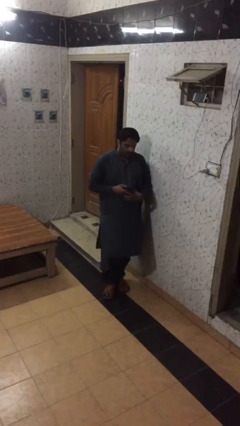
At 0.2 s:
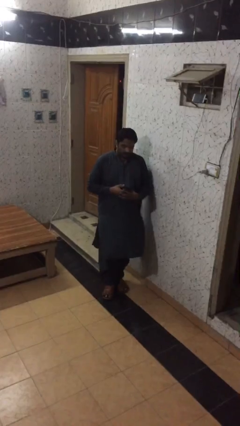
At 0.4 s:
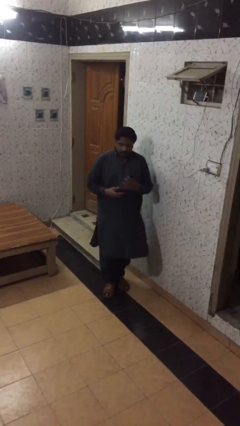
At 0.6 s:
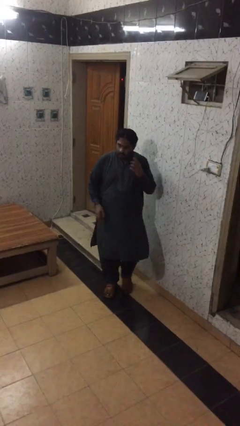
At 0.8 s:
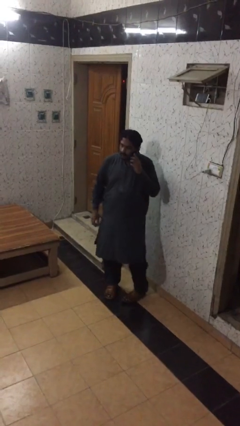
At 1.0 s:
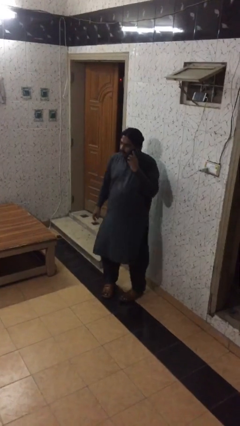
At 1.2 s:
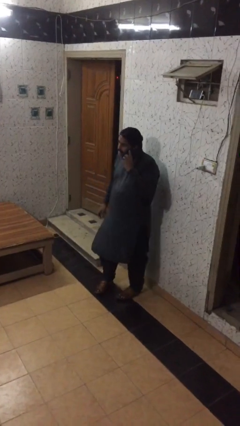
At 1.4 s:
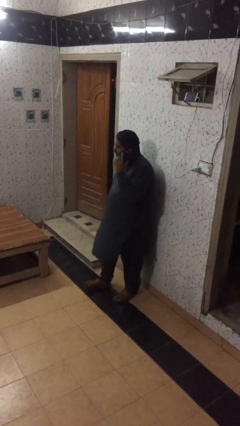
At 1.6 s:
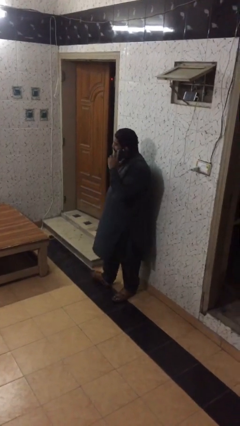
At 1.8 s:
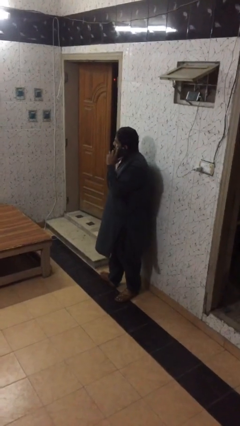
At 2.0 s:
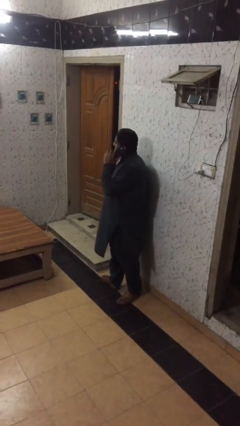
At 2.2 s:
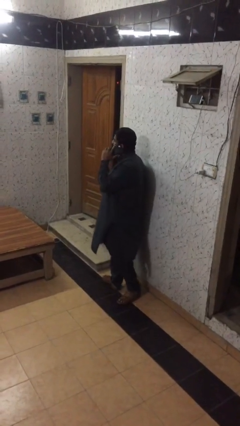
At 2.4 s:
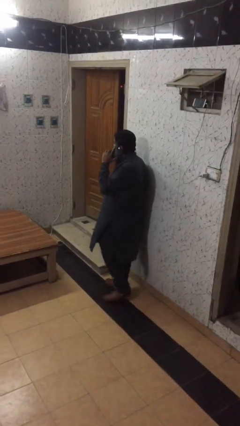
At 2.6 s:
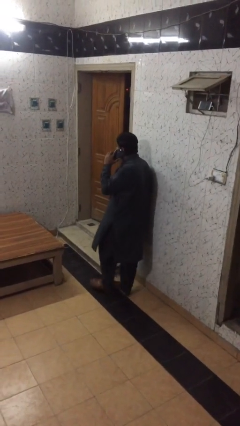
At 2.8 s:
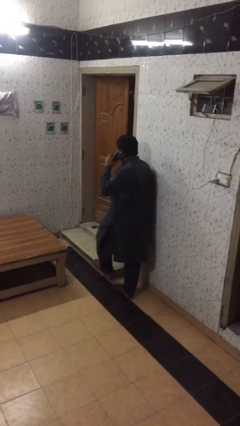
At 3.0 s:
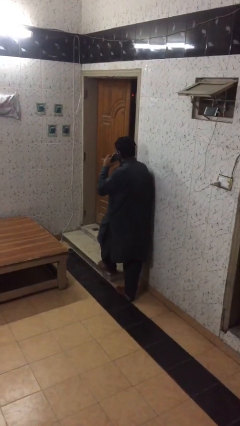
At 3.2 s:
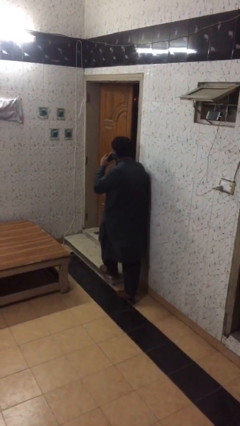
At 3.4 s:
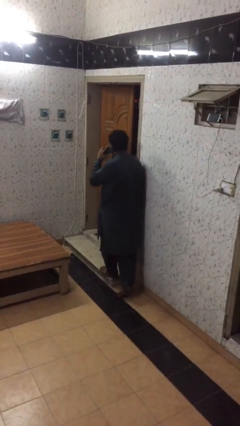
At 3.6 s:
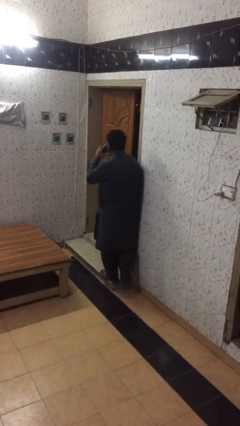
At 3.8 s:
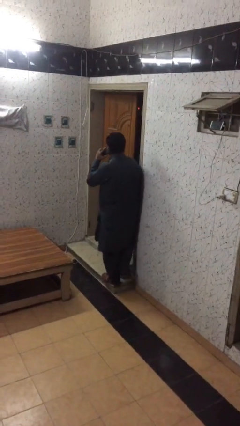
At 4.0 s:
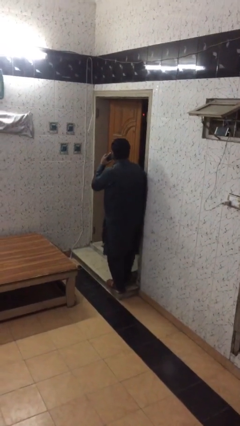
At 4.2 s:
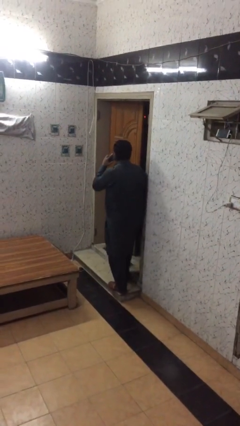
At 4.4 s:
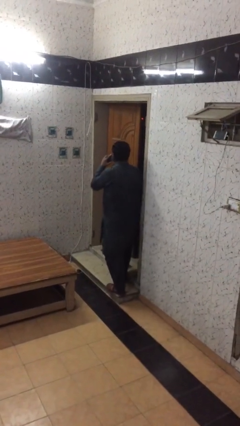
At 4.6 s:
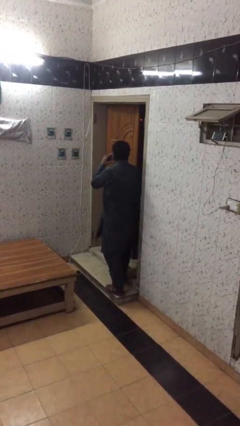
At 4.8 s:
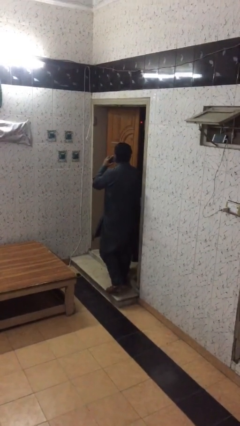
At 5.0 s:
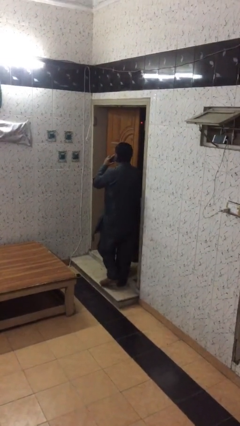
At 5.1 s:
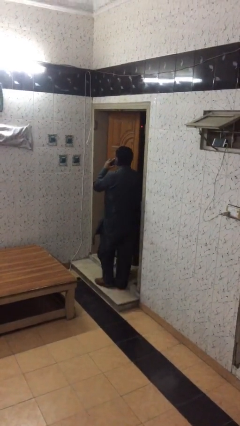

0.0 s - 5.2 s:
person talks on phone

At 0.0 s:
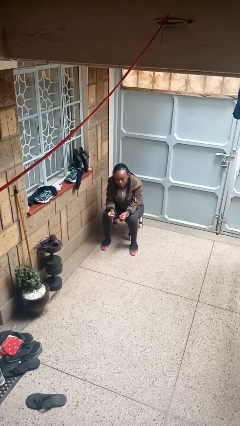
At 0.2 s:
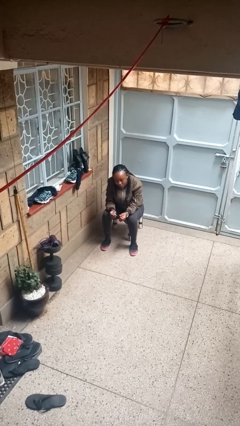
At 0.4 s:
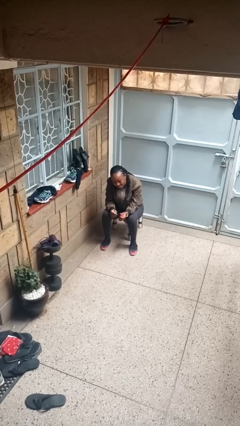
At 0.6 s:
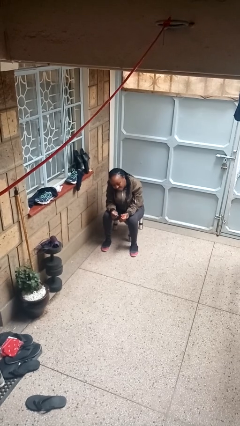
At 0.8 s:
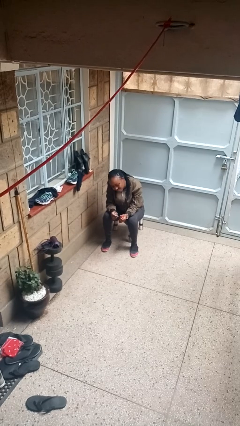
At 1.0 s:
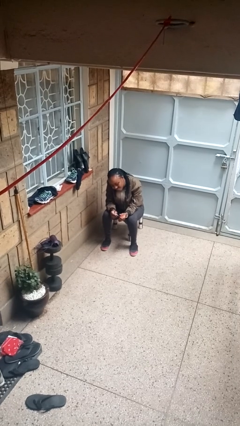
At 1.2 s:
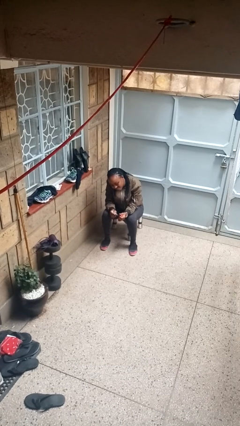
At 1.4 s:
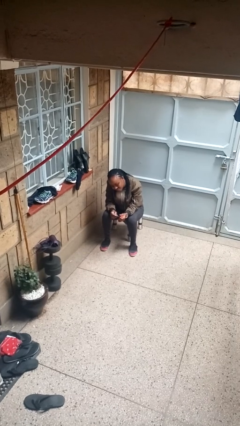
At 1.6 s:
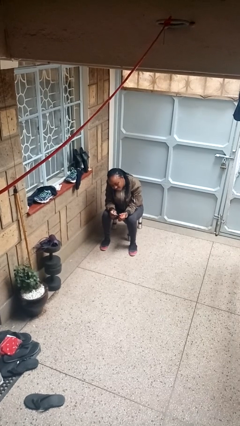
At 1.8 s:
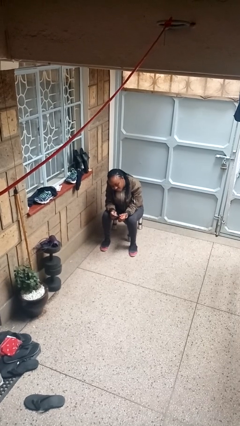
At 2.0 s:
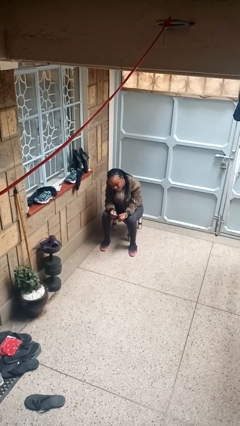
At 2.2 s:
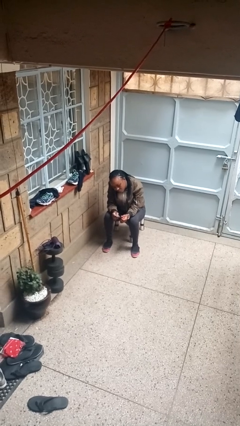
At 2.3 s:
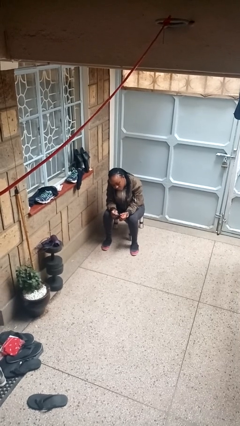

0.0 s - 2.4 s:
person paints fingernails

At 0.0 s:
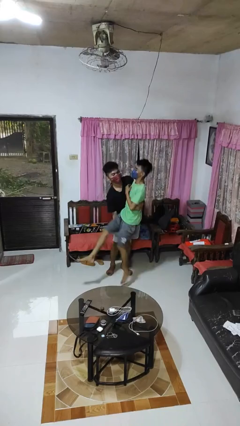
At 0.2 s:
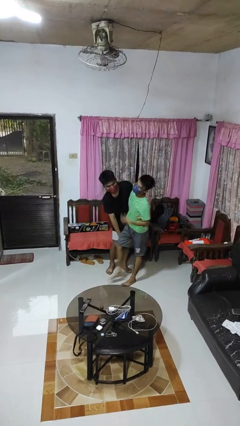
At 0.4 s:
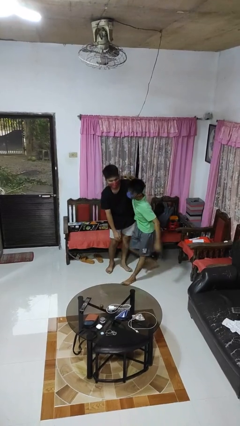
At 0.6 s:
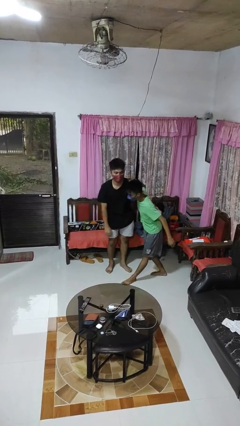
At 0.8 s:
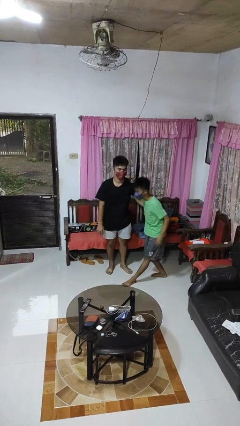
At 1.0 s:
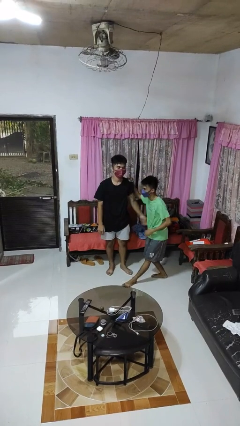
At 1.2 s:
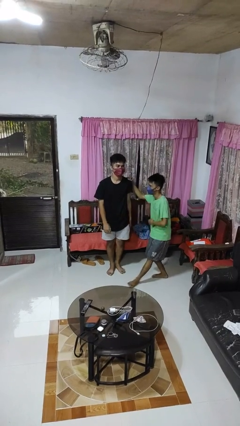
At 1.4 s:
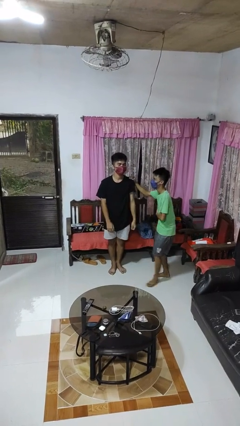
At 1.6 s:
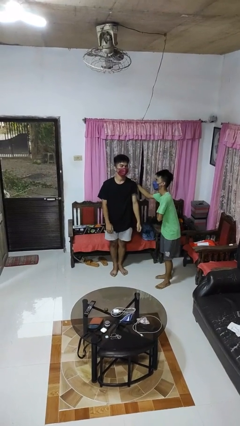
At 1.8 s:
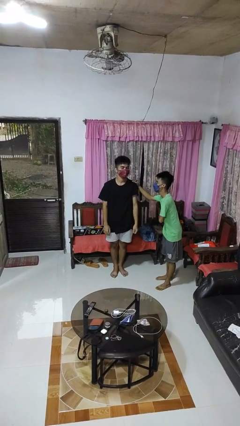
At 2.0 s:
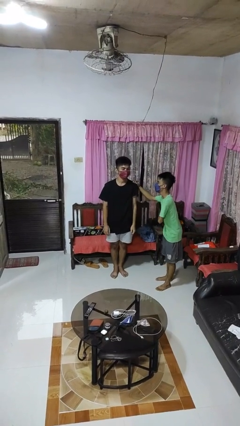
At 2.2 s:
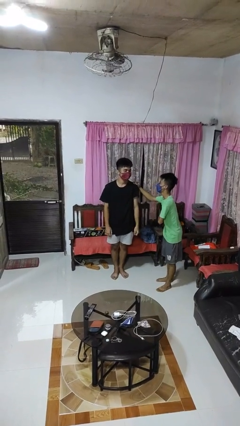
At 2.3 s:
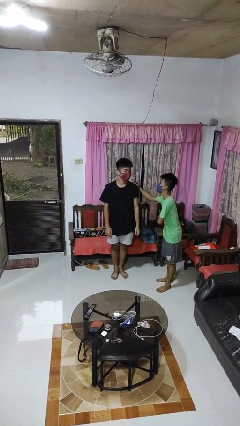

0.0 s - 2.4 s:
person puts down person

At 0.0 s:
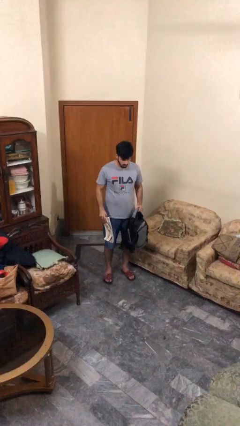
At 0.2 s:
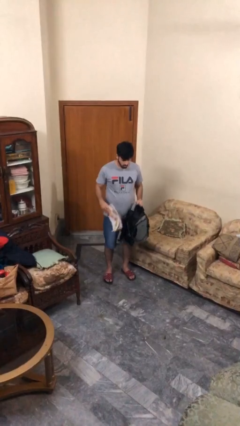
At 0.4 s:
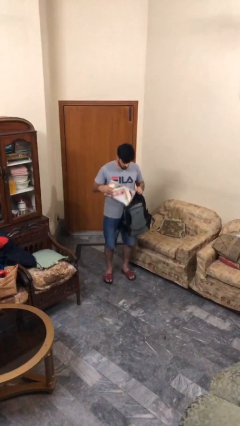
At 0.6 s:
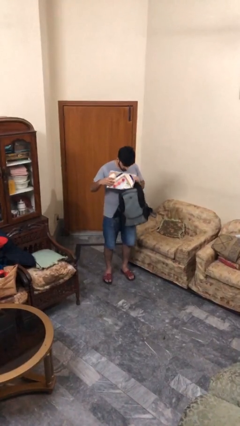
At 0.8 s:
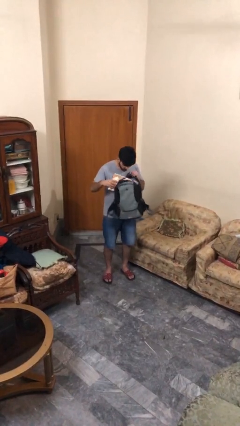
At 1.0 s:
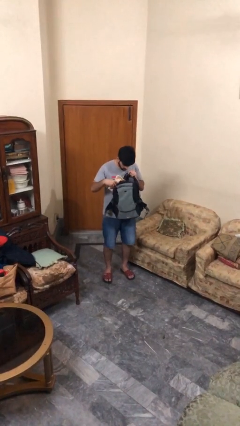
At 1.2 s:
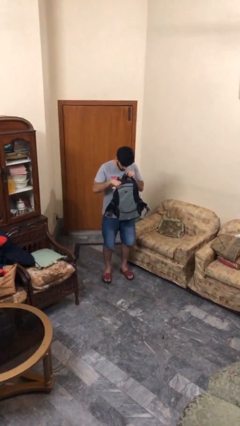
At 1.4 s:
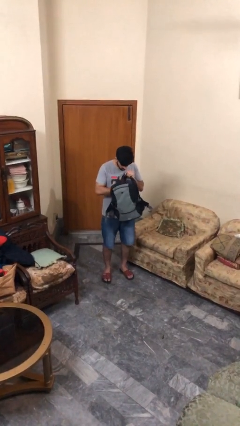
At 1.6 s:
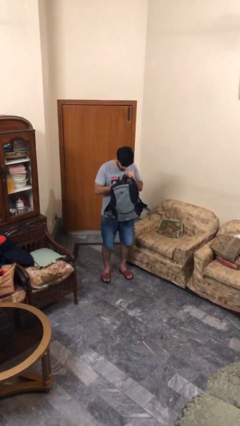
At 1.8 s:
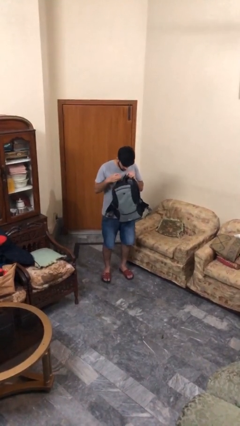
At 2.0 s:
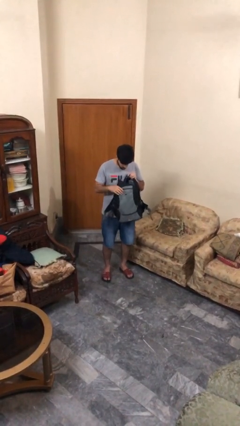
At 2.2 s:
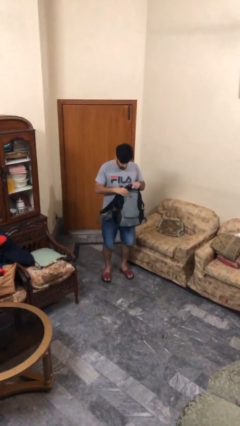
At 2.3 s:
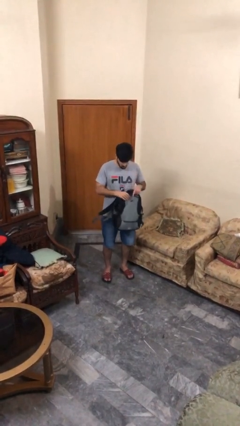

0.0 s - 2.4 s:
person puts object into backpack

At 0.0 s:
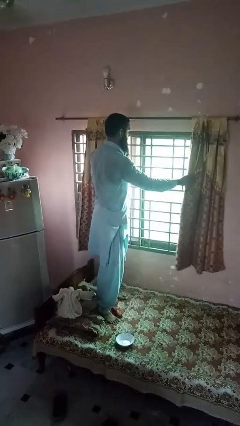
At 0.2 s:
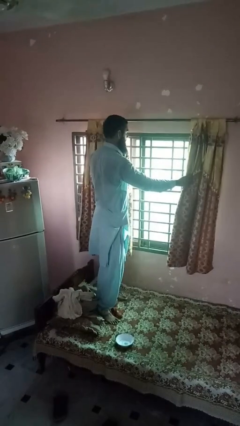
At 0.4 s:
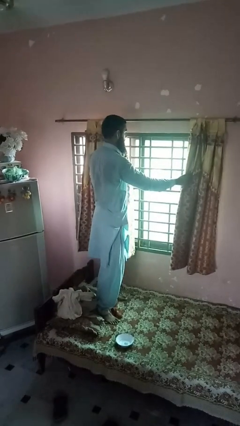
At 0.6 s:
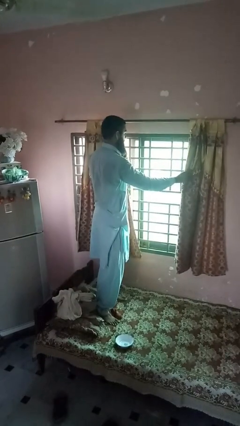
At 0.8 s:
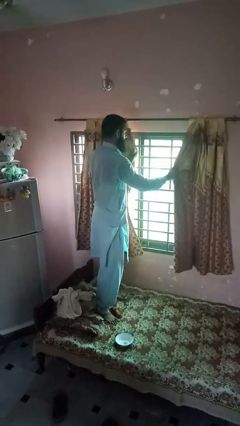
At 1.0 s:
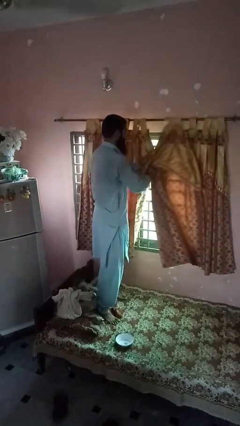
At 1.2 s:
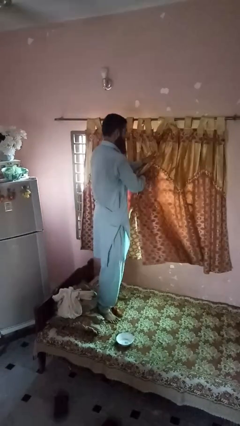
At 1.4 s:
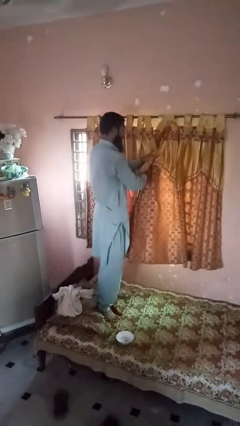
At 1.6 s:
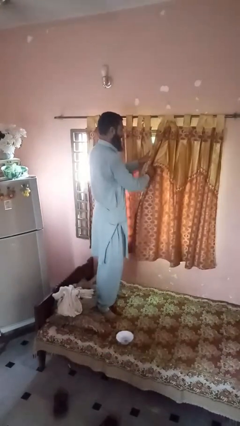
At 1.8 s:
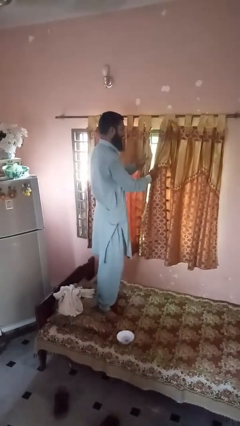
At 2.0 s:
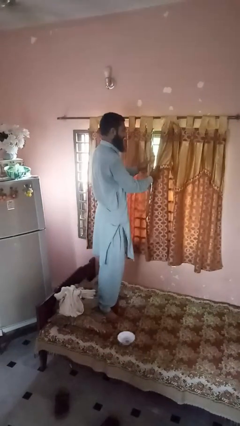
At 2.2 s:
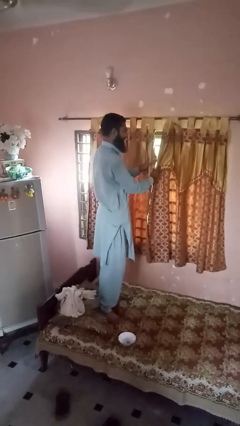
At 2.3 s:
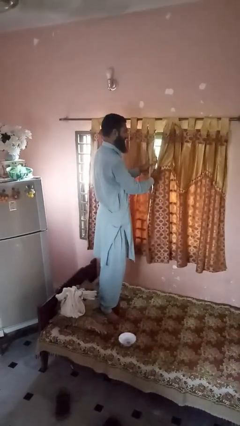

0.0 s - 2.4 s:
person closes curtains

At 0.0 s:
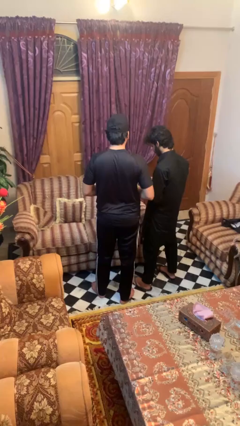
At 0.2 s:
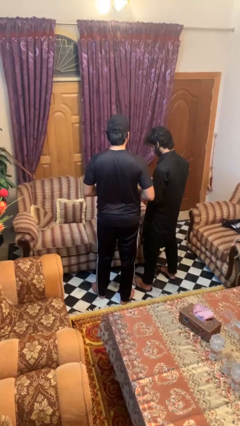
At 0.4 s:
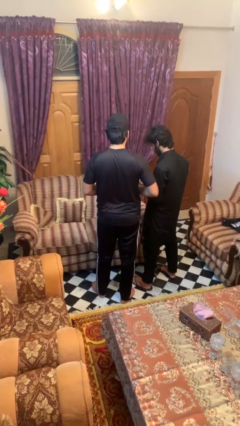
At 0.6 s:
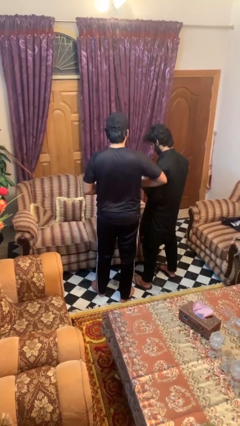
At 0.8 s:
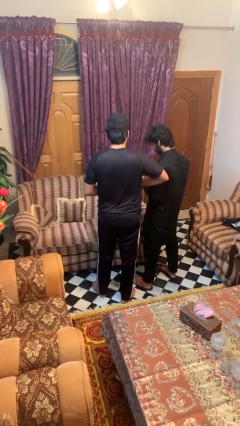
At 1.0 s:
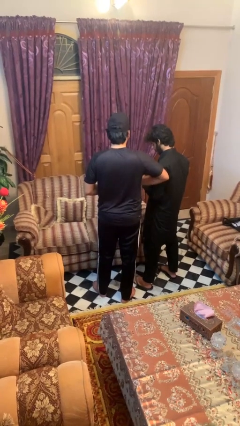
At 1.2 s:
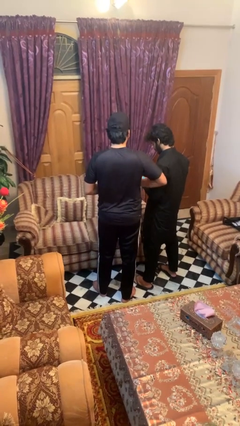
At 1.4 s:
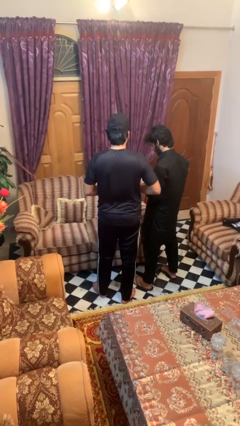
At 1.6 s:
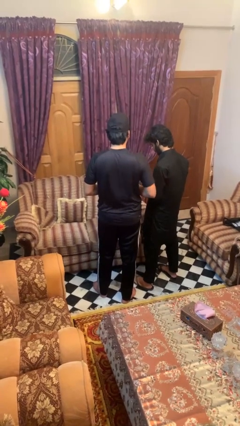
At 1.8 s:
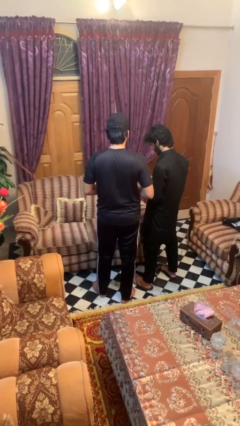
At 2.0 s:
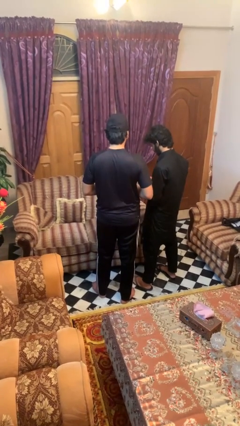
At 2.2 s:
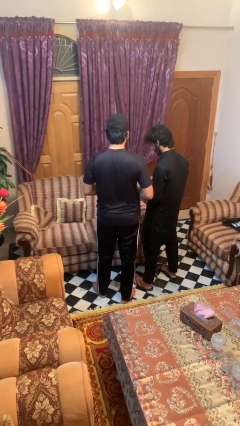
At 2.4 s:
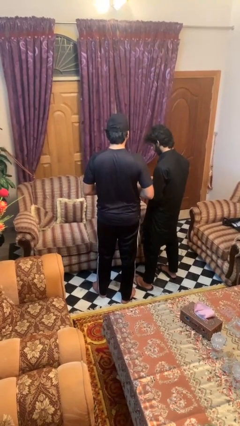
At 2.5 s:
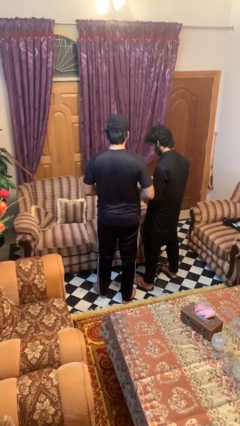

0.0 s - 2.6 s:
person nudges person with elbow
